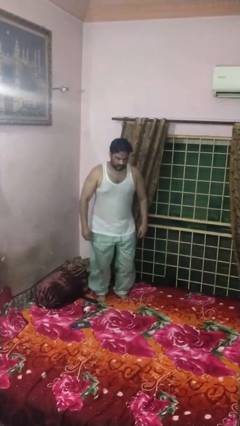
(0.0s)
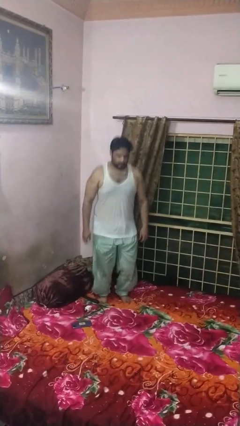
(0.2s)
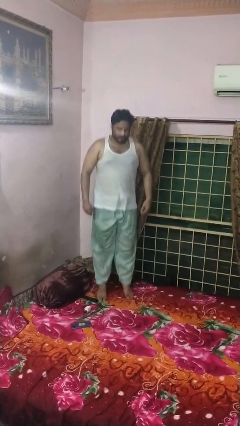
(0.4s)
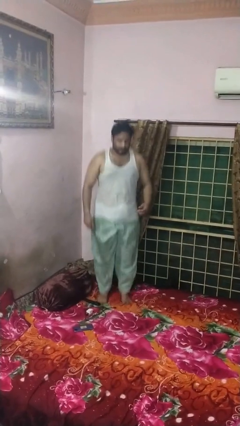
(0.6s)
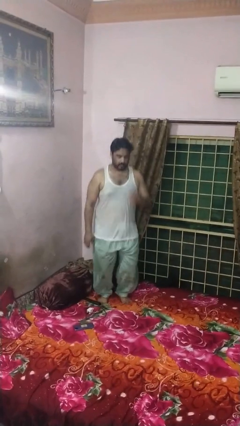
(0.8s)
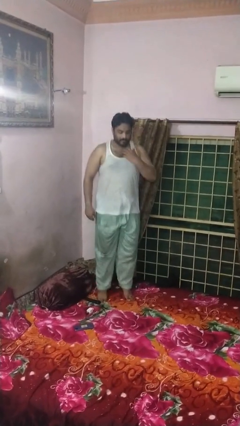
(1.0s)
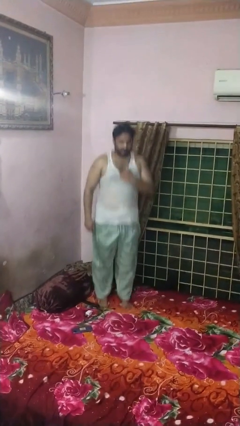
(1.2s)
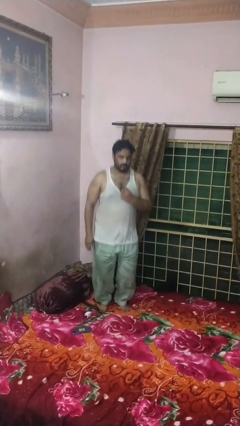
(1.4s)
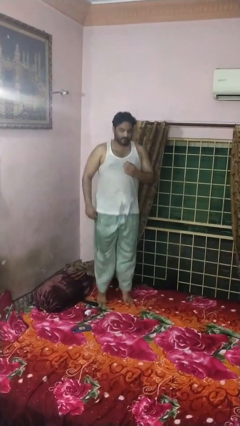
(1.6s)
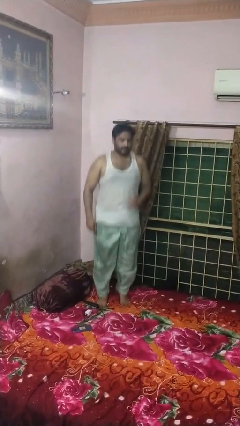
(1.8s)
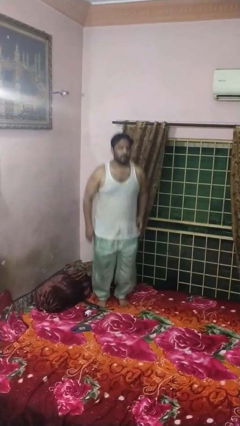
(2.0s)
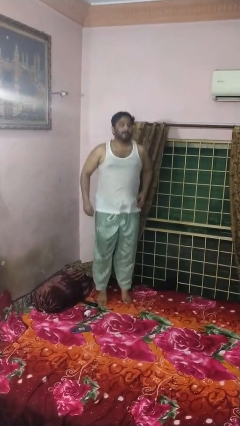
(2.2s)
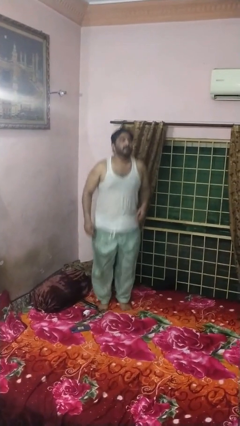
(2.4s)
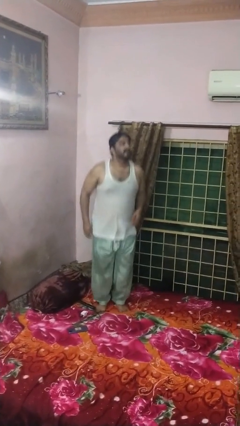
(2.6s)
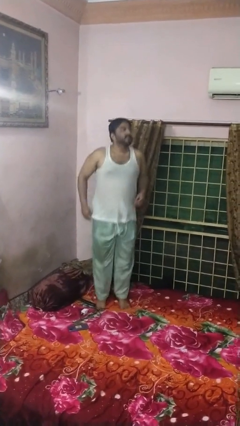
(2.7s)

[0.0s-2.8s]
person jumps on bed

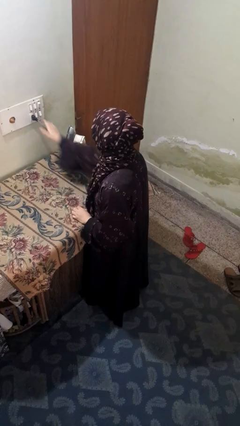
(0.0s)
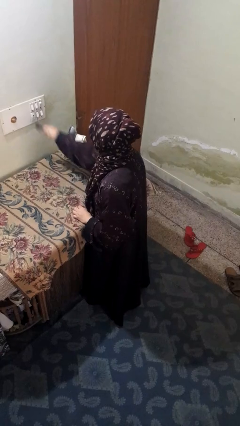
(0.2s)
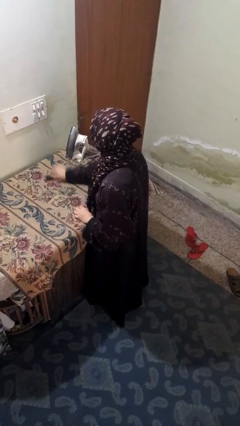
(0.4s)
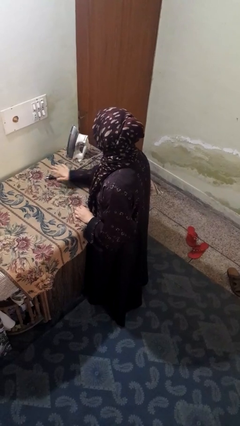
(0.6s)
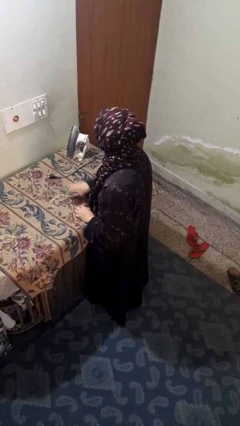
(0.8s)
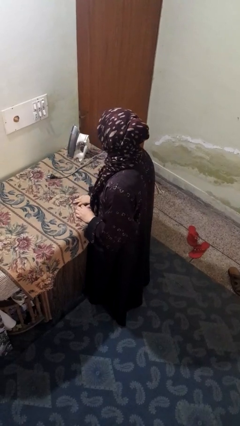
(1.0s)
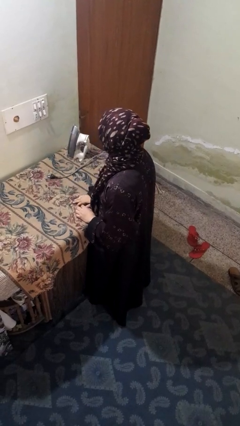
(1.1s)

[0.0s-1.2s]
person unplugs from electrical socket

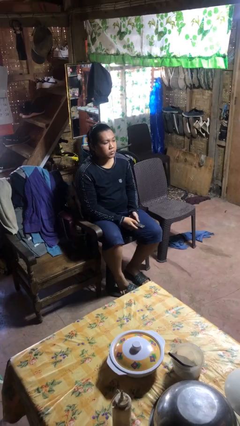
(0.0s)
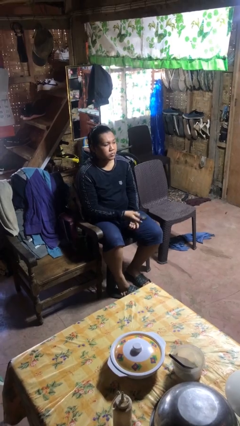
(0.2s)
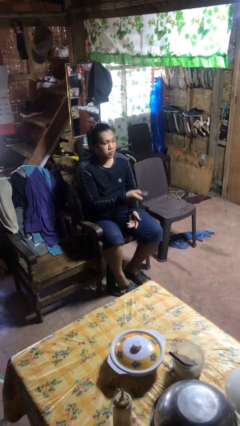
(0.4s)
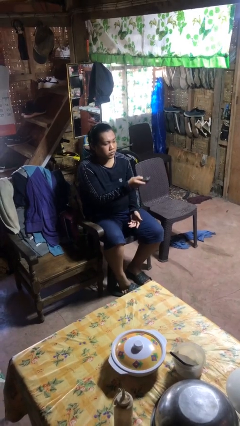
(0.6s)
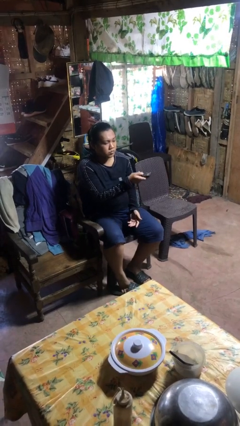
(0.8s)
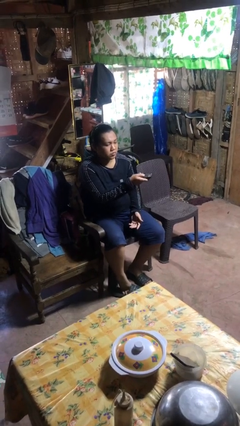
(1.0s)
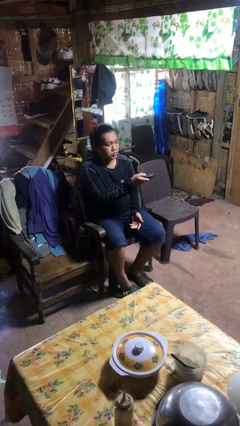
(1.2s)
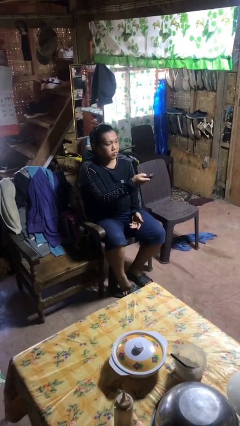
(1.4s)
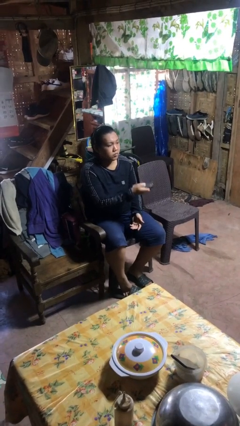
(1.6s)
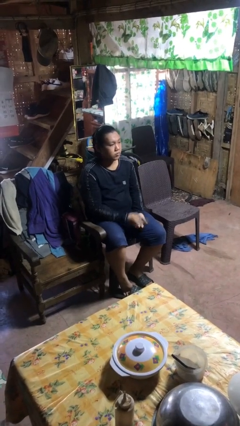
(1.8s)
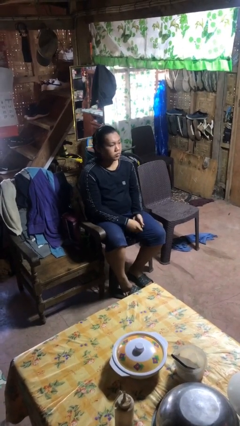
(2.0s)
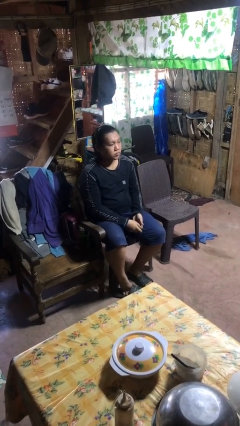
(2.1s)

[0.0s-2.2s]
person uses television remote

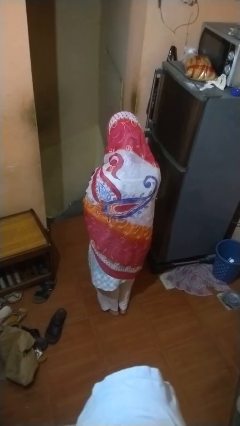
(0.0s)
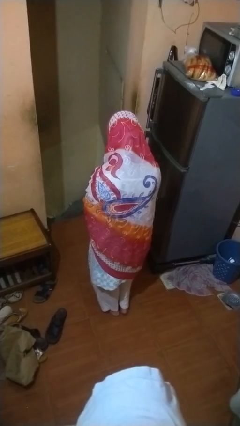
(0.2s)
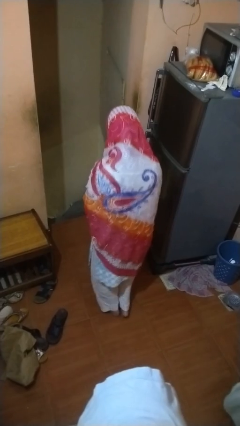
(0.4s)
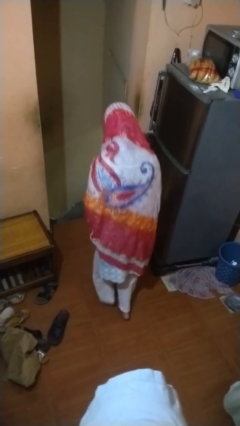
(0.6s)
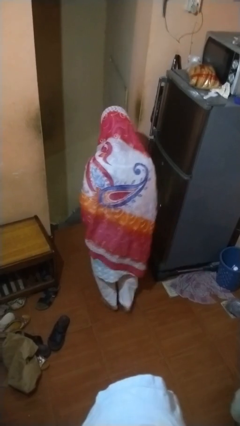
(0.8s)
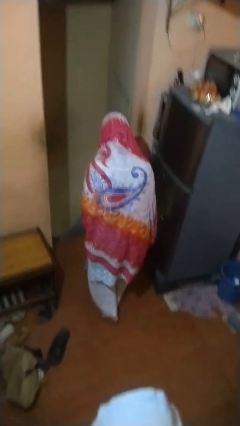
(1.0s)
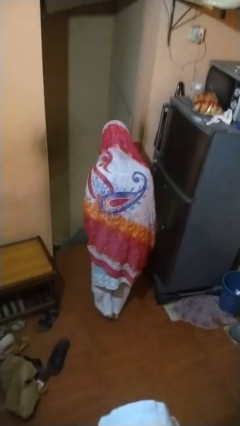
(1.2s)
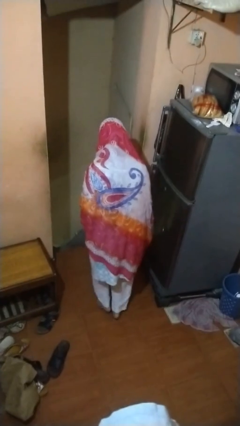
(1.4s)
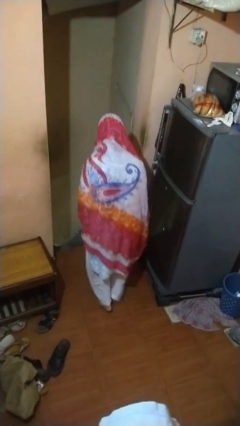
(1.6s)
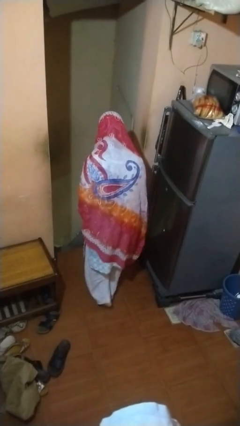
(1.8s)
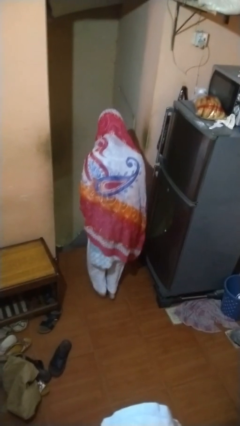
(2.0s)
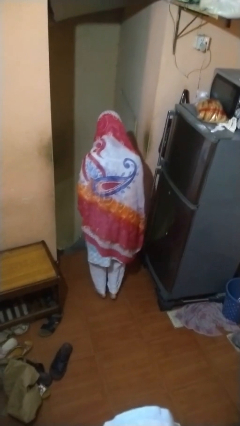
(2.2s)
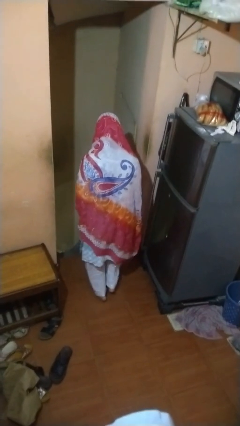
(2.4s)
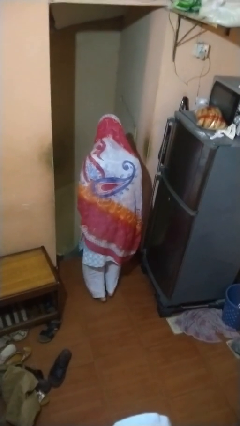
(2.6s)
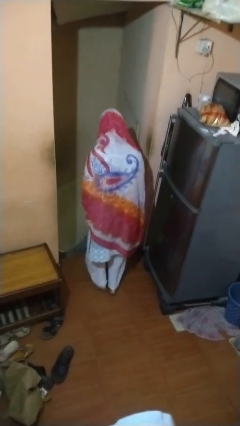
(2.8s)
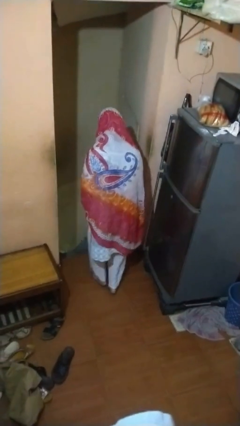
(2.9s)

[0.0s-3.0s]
person walks tiptoe

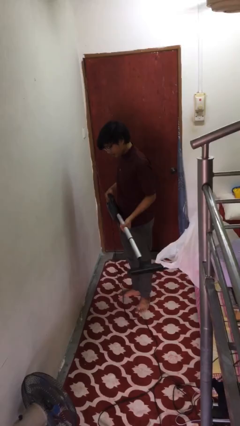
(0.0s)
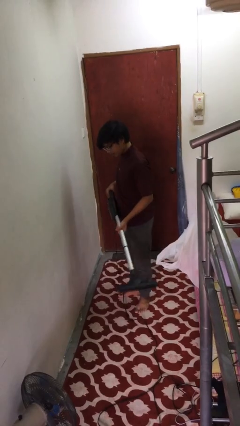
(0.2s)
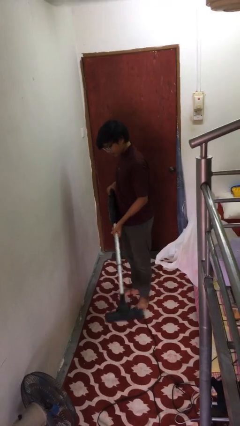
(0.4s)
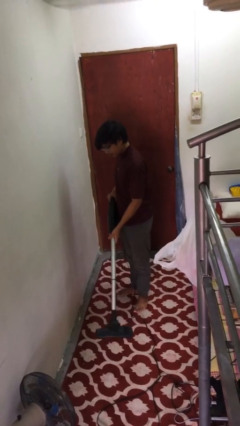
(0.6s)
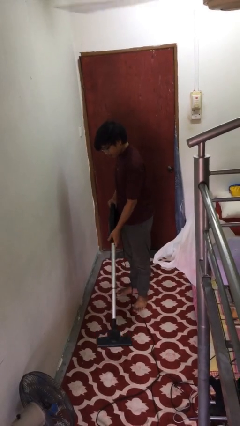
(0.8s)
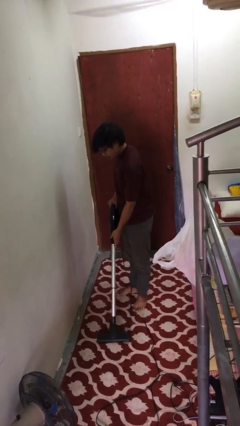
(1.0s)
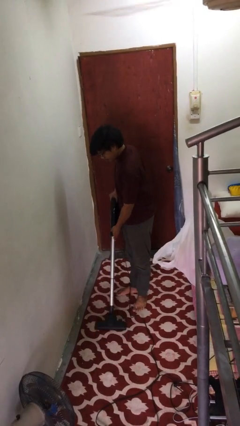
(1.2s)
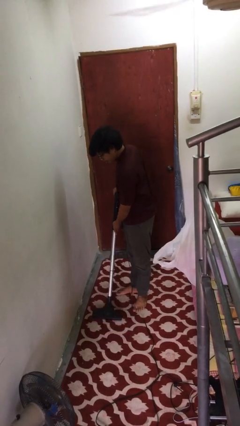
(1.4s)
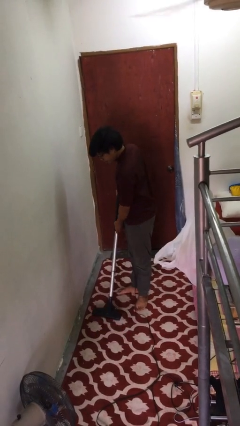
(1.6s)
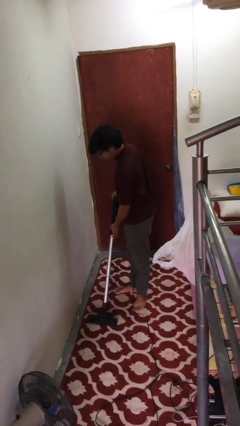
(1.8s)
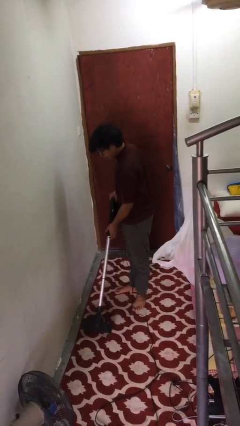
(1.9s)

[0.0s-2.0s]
person vacuums carpet

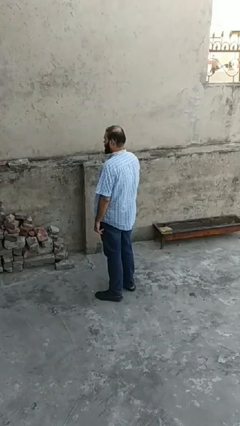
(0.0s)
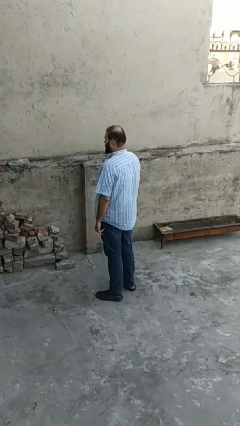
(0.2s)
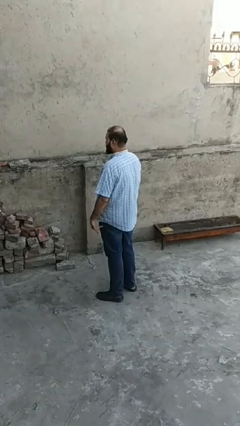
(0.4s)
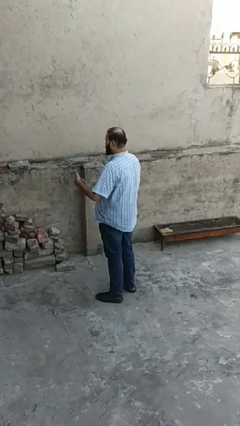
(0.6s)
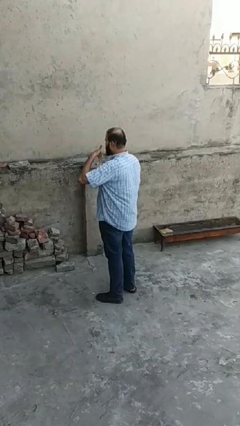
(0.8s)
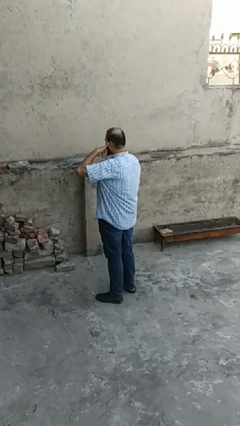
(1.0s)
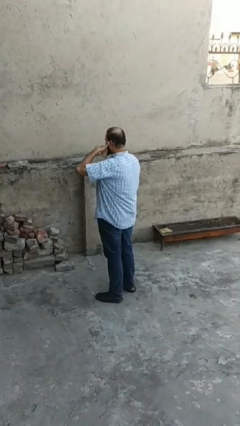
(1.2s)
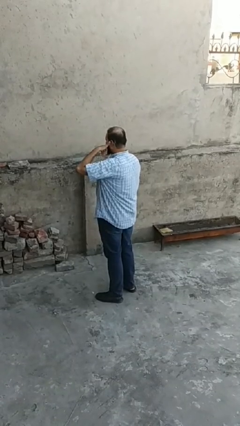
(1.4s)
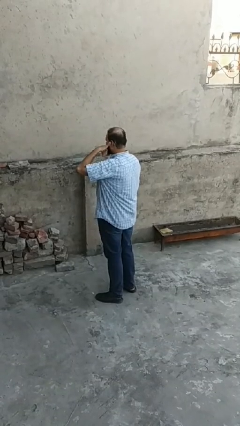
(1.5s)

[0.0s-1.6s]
person gestures call me

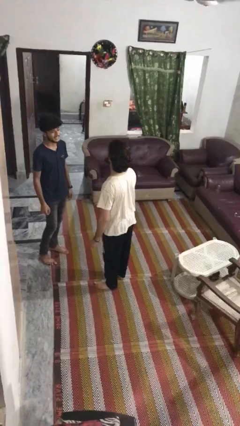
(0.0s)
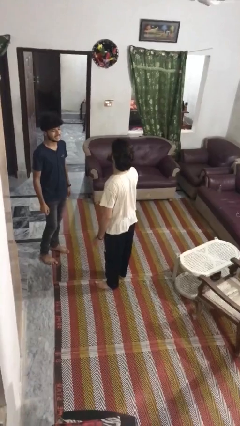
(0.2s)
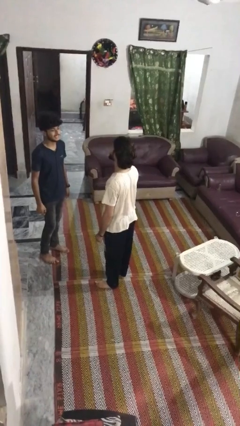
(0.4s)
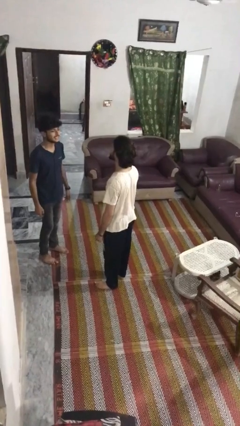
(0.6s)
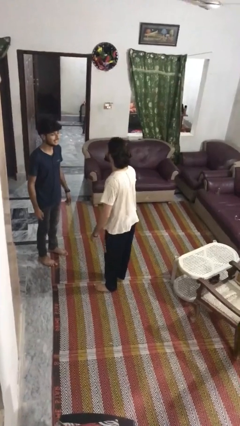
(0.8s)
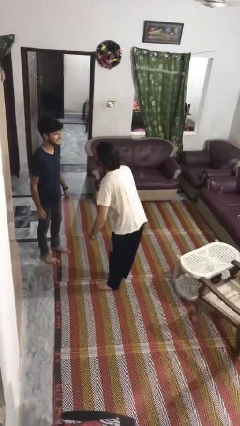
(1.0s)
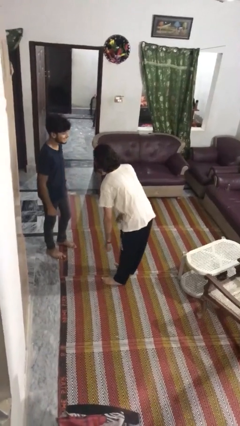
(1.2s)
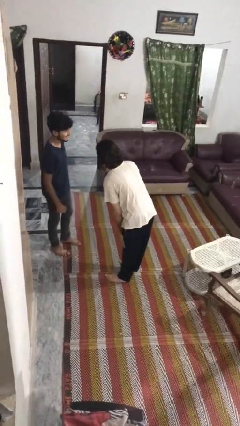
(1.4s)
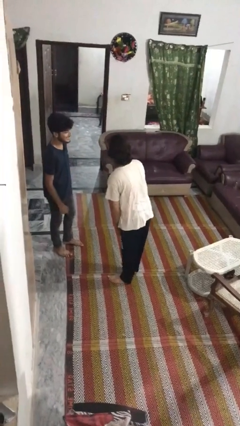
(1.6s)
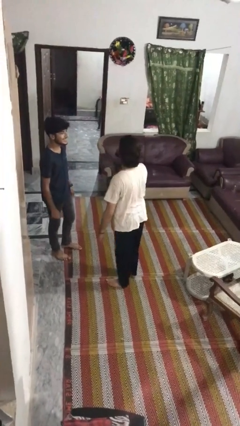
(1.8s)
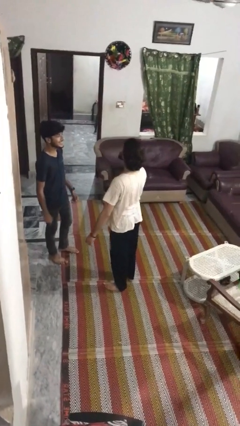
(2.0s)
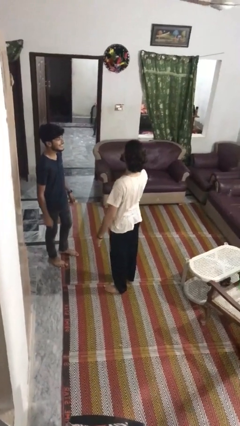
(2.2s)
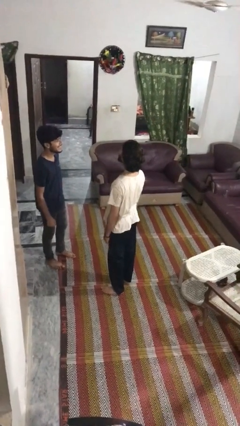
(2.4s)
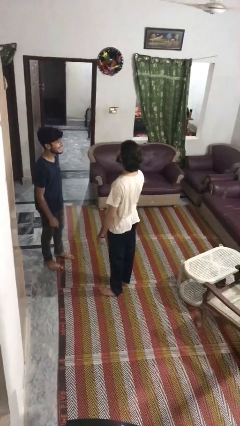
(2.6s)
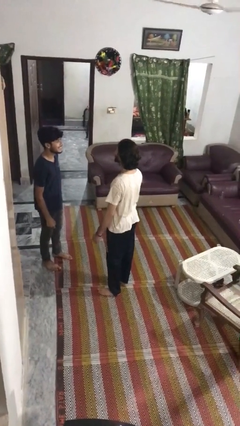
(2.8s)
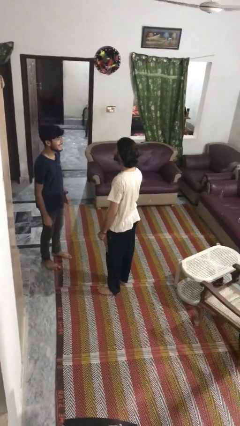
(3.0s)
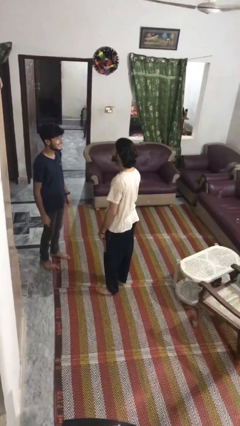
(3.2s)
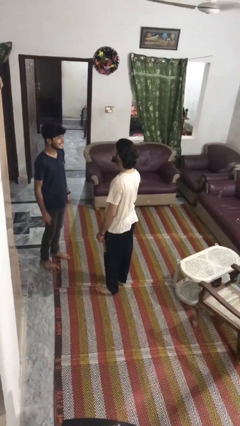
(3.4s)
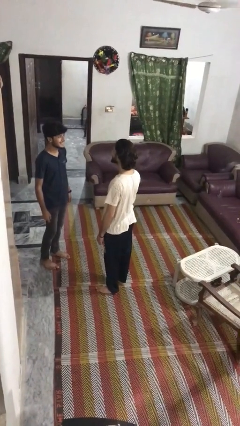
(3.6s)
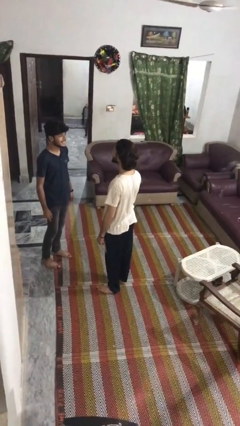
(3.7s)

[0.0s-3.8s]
person laughs with person

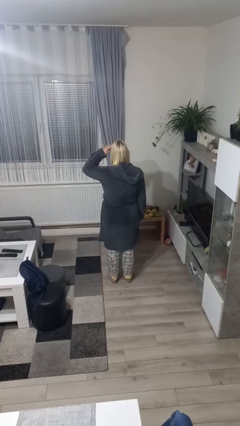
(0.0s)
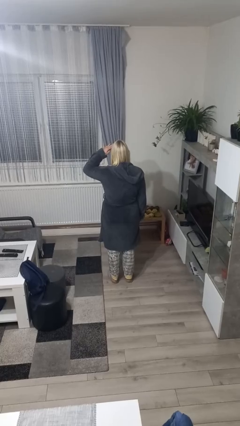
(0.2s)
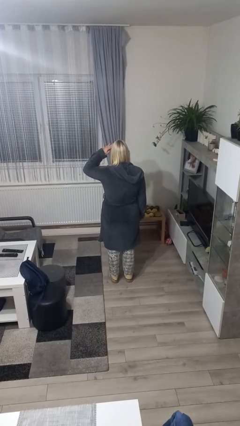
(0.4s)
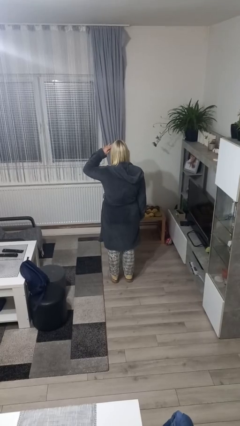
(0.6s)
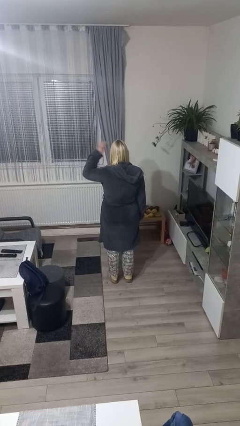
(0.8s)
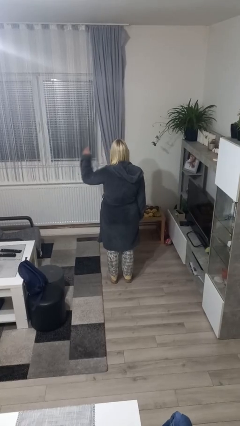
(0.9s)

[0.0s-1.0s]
person salutes
